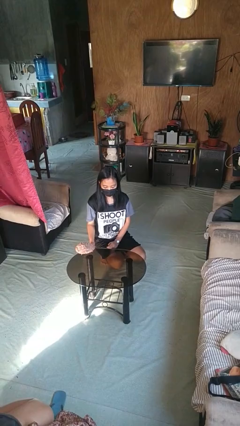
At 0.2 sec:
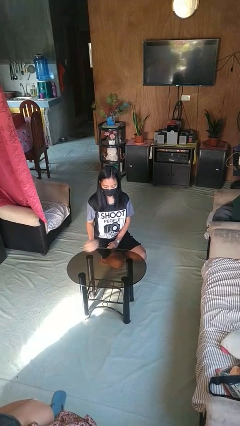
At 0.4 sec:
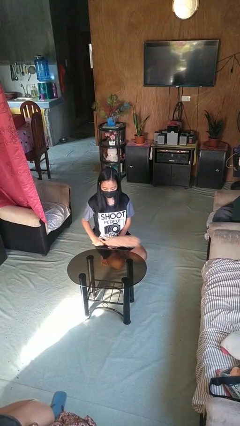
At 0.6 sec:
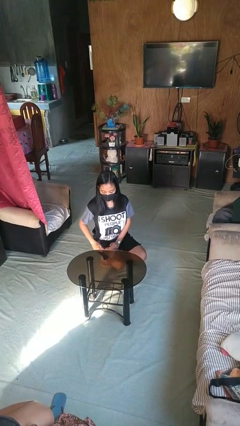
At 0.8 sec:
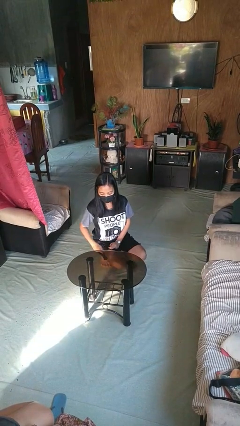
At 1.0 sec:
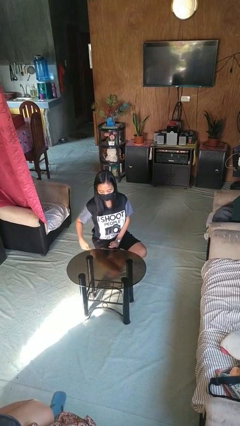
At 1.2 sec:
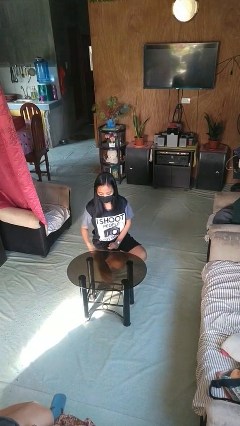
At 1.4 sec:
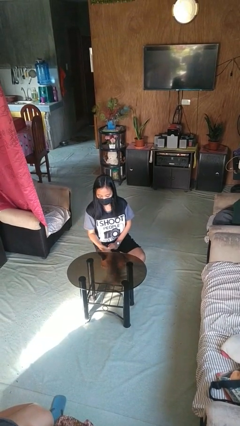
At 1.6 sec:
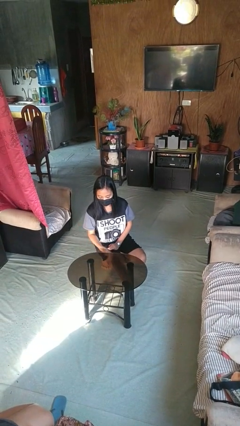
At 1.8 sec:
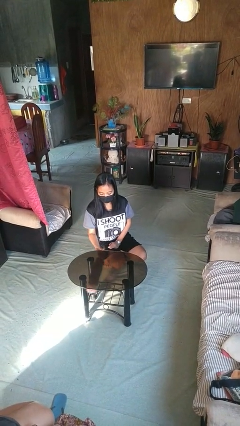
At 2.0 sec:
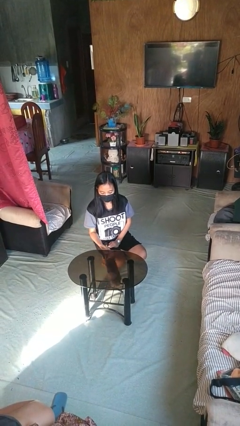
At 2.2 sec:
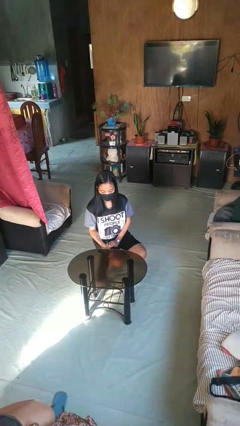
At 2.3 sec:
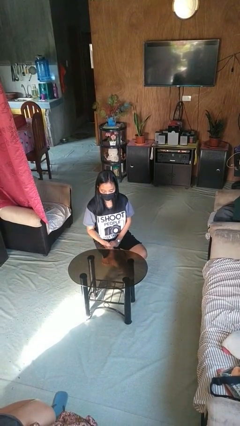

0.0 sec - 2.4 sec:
person dusts furniture

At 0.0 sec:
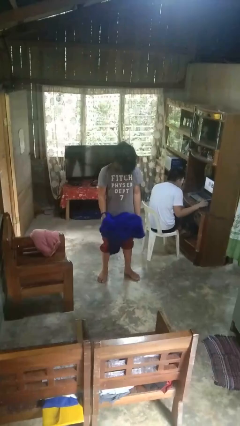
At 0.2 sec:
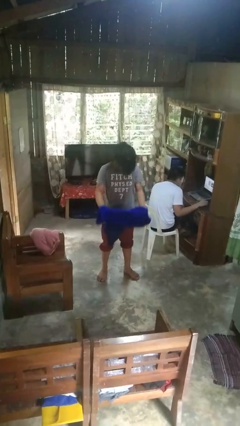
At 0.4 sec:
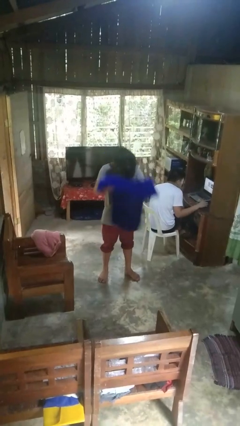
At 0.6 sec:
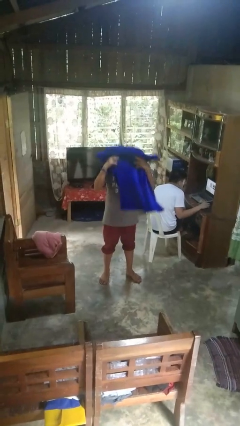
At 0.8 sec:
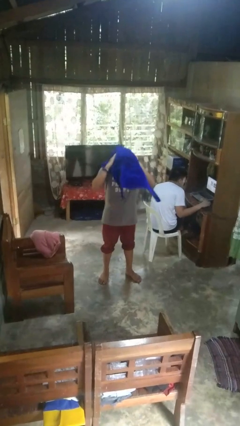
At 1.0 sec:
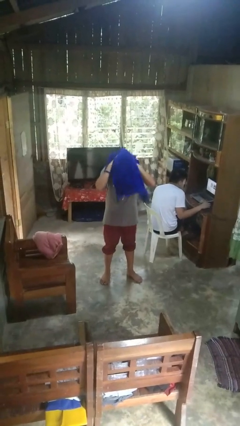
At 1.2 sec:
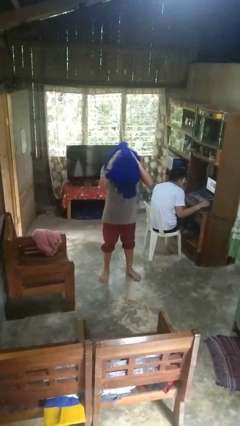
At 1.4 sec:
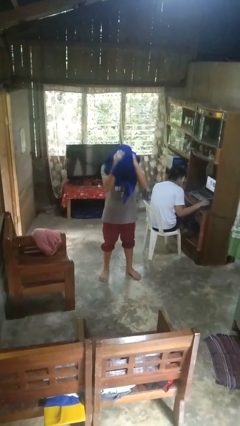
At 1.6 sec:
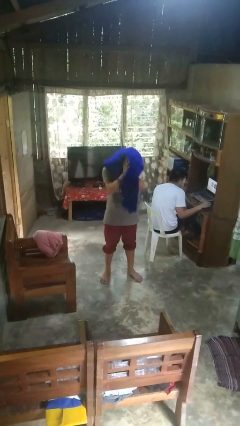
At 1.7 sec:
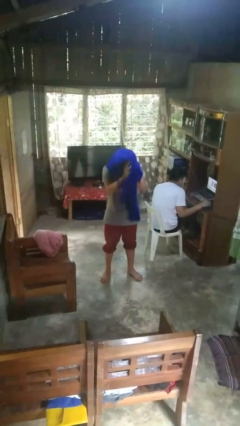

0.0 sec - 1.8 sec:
person dries hair with towel

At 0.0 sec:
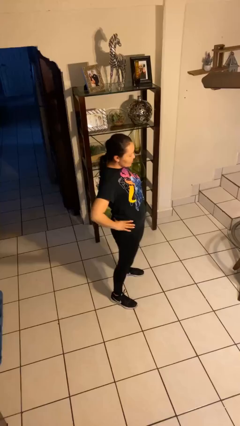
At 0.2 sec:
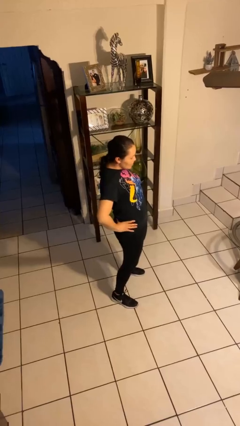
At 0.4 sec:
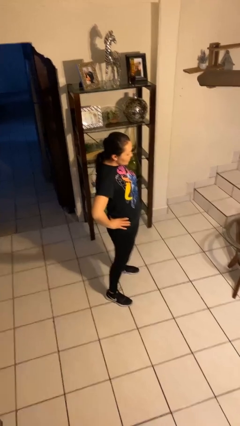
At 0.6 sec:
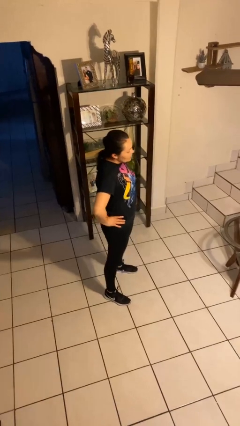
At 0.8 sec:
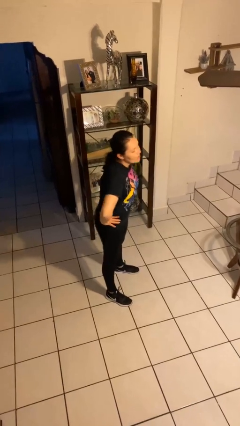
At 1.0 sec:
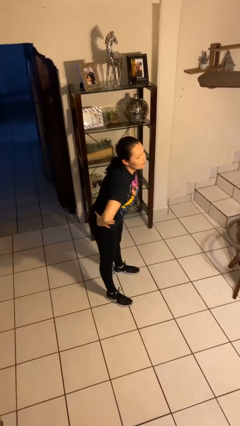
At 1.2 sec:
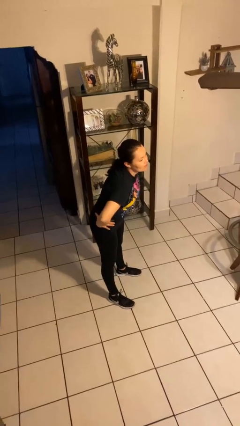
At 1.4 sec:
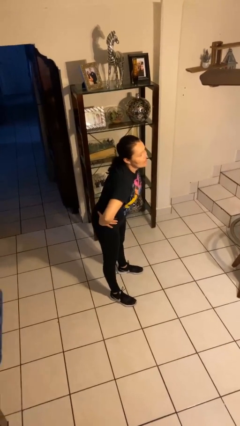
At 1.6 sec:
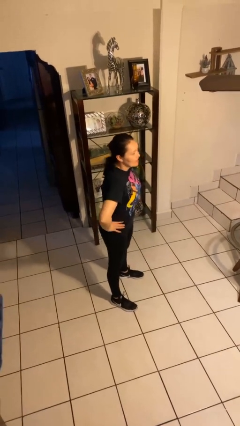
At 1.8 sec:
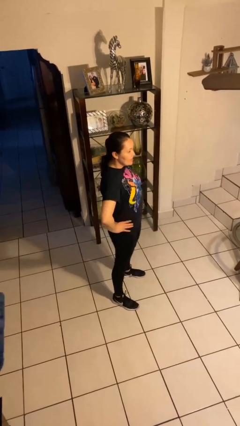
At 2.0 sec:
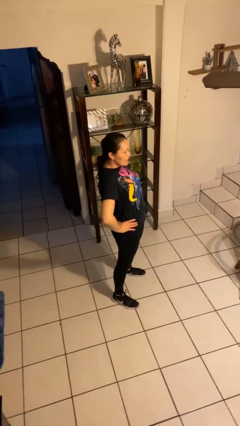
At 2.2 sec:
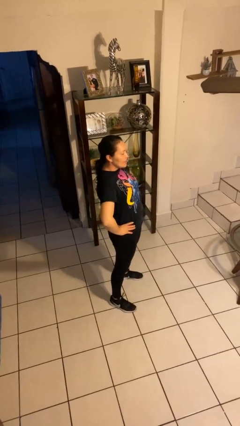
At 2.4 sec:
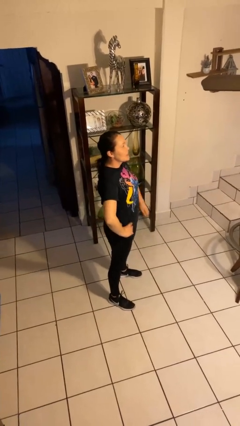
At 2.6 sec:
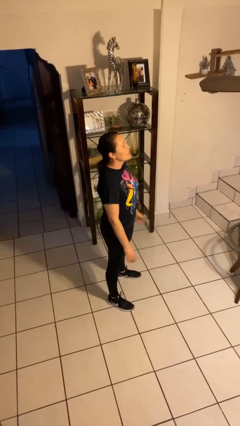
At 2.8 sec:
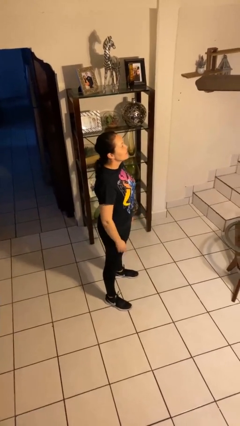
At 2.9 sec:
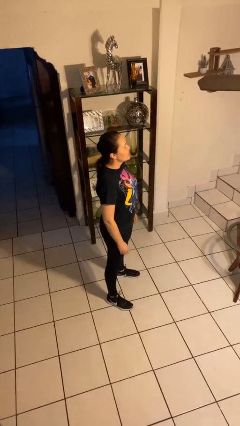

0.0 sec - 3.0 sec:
person wiggles hips

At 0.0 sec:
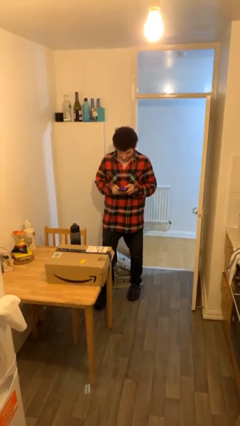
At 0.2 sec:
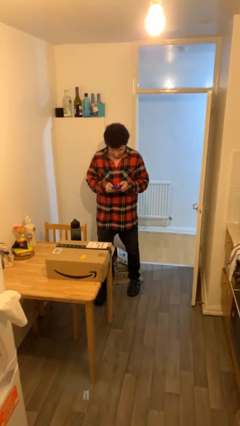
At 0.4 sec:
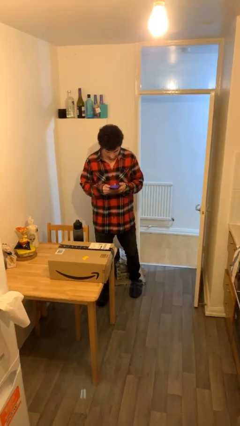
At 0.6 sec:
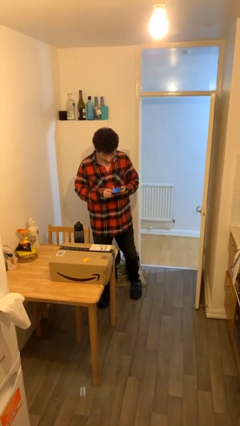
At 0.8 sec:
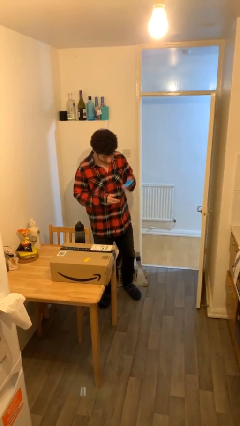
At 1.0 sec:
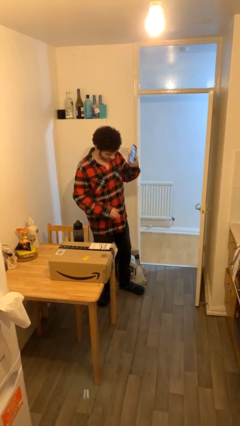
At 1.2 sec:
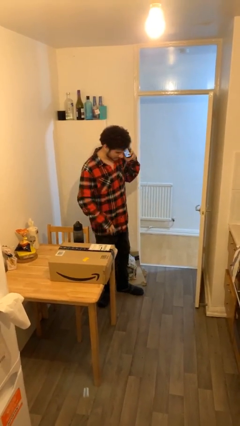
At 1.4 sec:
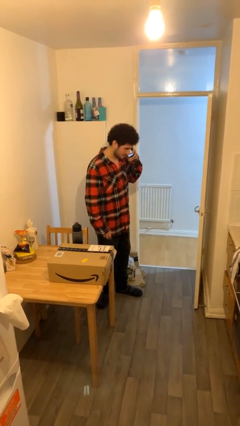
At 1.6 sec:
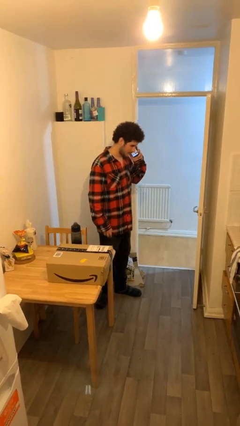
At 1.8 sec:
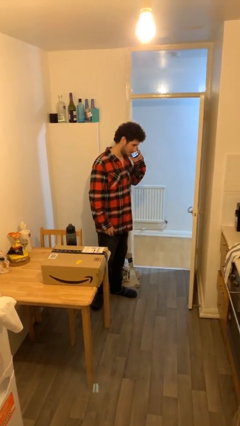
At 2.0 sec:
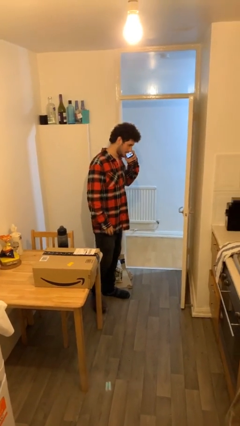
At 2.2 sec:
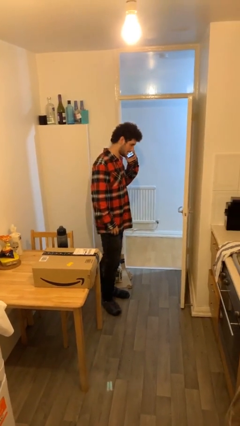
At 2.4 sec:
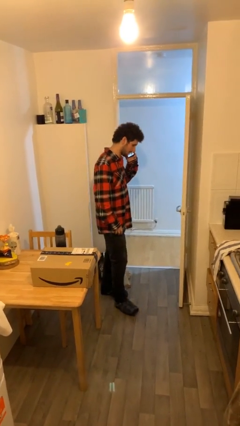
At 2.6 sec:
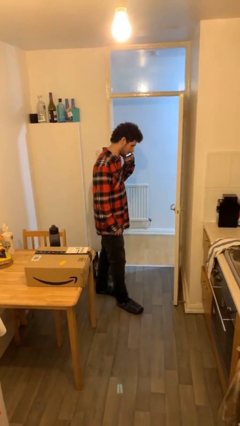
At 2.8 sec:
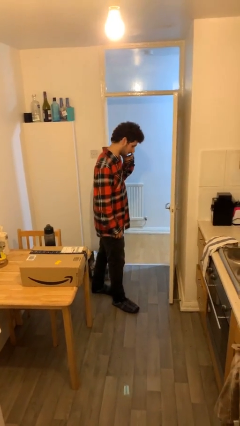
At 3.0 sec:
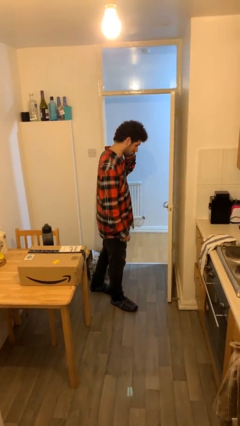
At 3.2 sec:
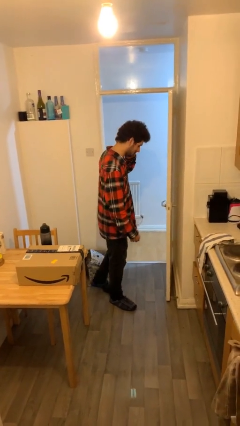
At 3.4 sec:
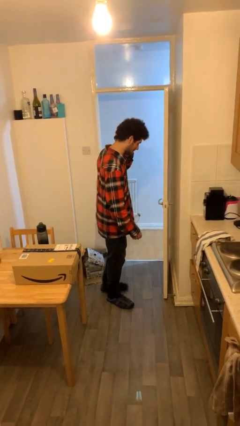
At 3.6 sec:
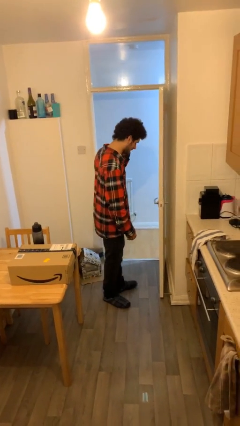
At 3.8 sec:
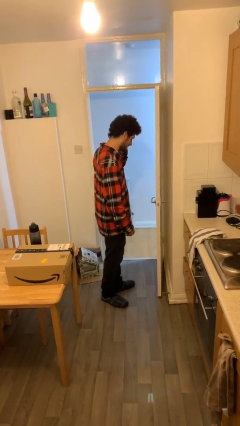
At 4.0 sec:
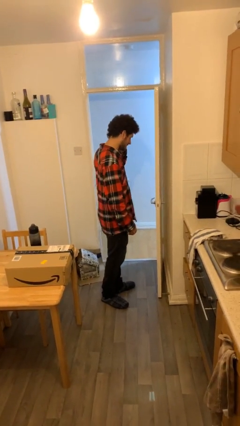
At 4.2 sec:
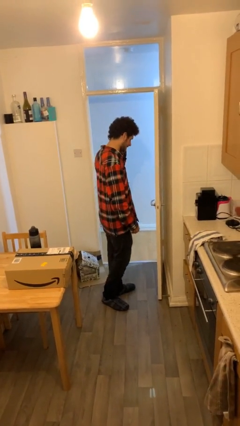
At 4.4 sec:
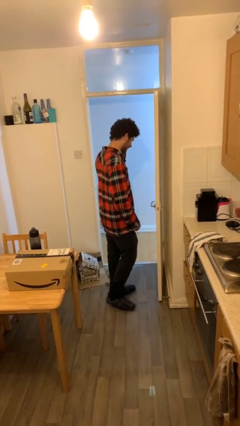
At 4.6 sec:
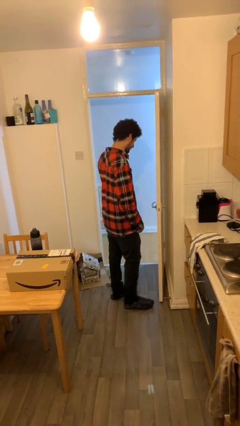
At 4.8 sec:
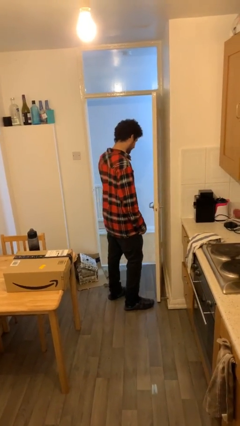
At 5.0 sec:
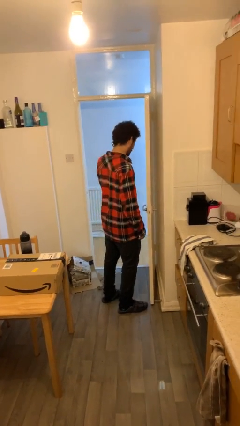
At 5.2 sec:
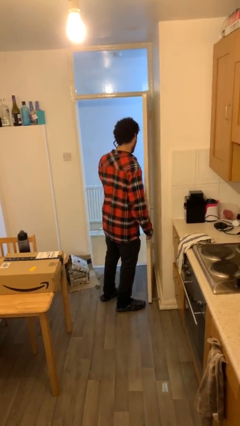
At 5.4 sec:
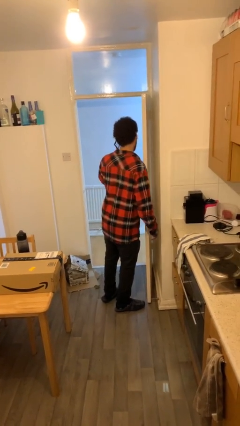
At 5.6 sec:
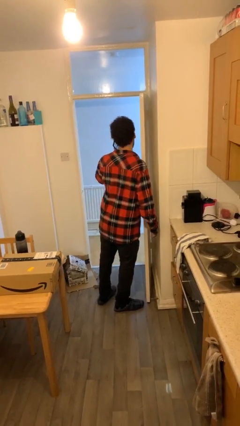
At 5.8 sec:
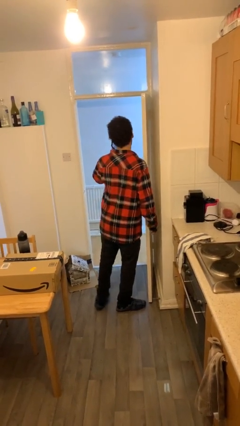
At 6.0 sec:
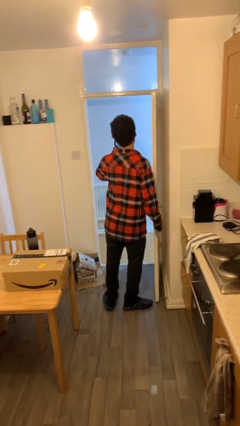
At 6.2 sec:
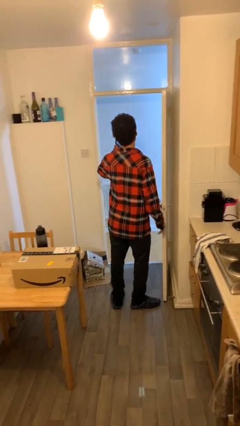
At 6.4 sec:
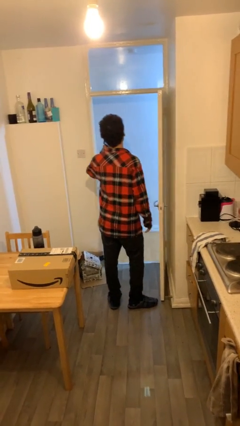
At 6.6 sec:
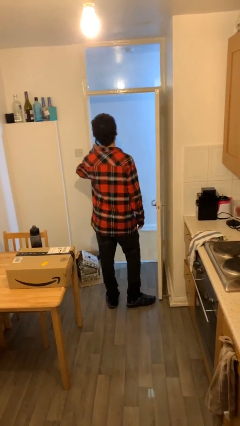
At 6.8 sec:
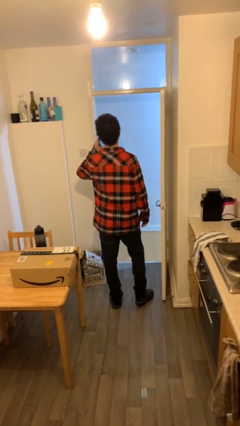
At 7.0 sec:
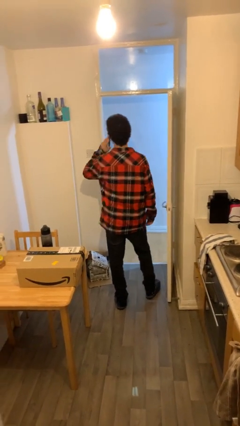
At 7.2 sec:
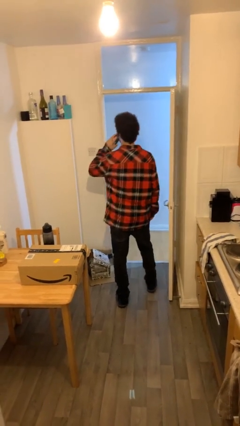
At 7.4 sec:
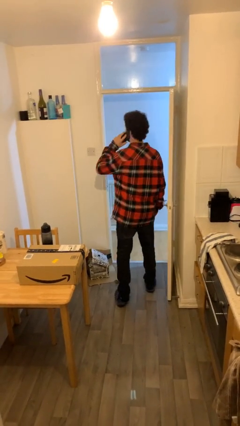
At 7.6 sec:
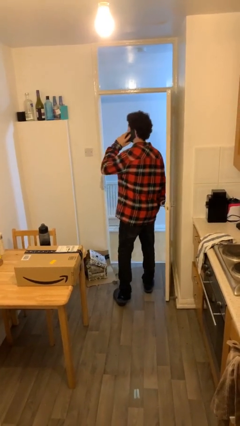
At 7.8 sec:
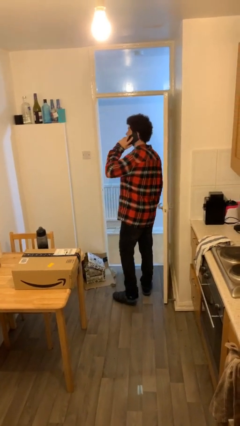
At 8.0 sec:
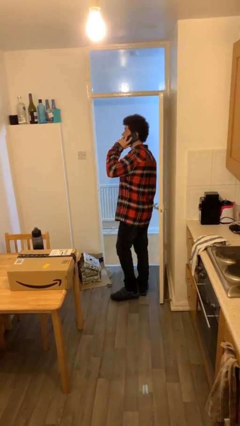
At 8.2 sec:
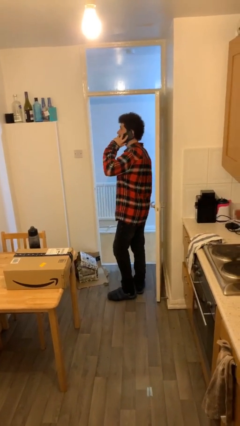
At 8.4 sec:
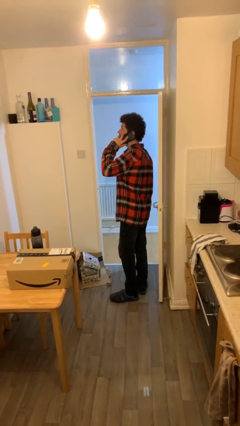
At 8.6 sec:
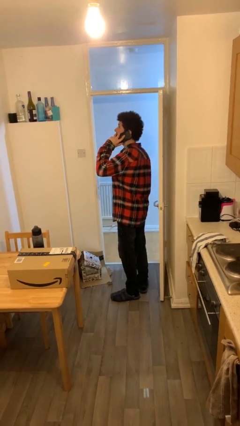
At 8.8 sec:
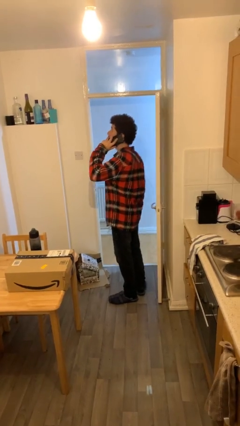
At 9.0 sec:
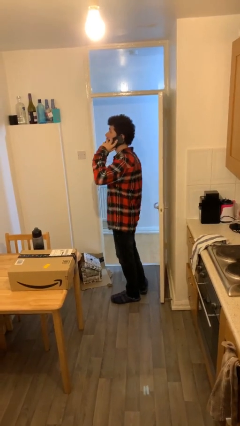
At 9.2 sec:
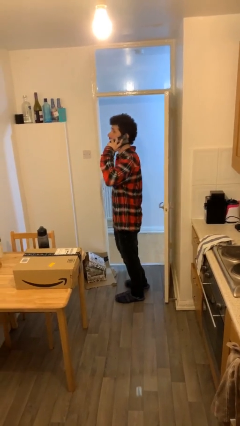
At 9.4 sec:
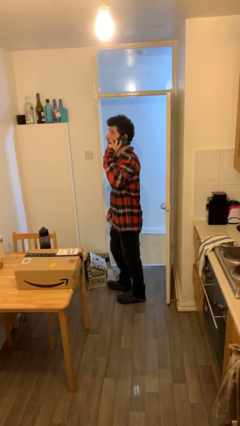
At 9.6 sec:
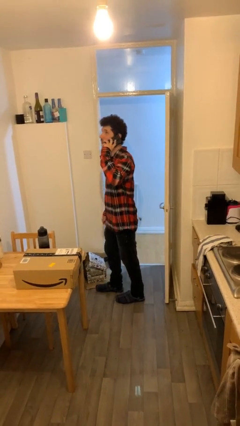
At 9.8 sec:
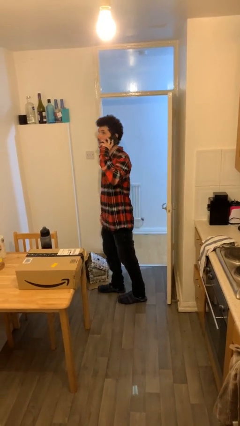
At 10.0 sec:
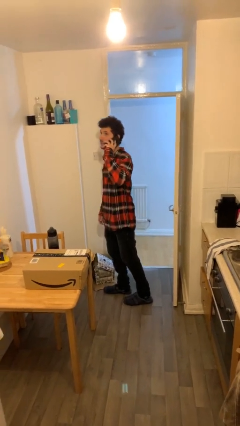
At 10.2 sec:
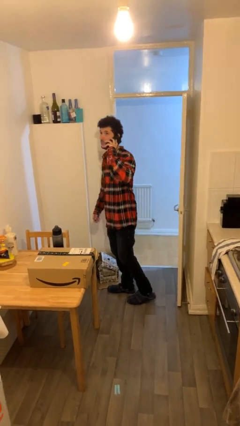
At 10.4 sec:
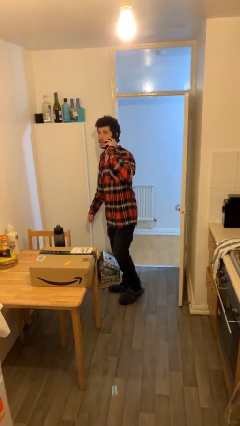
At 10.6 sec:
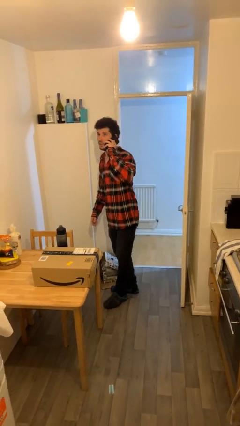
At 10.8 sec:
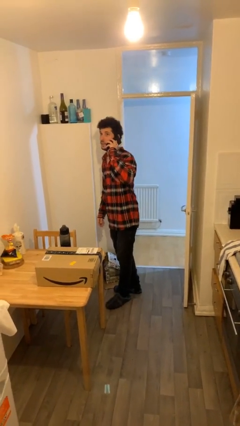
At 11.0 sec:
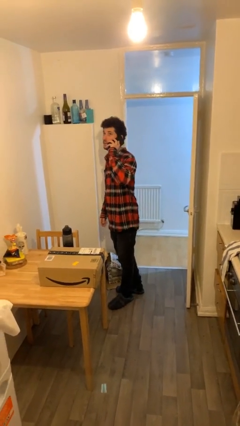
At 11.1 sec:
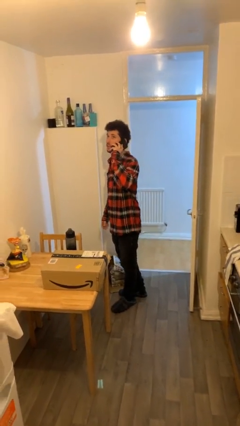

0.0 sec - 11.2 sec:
person talks on phone
